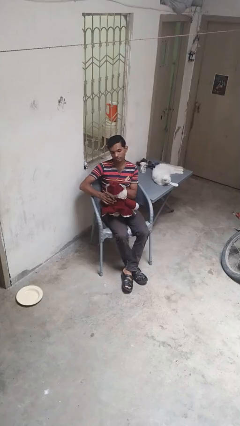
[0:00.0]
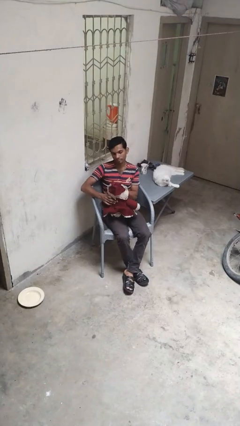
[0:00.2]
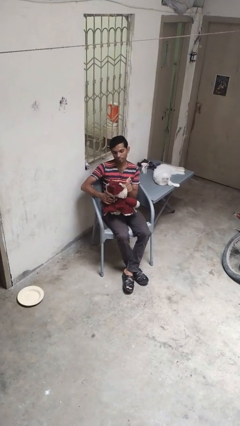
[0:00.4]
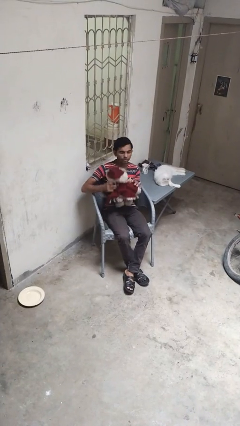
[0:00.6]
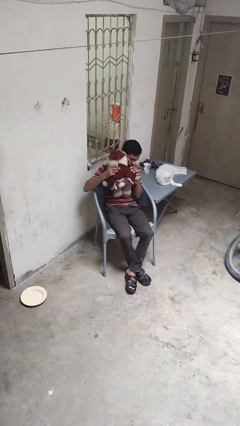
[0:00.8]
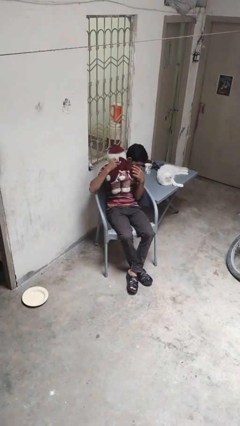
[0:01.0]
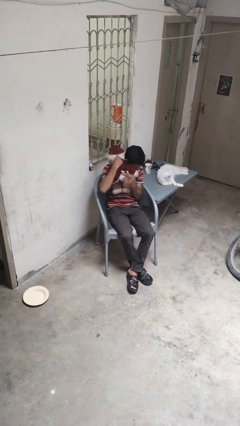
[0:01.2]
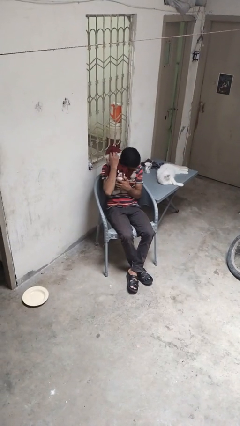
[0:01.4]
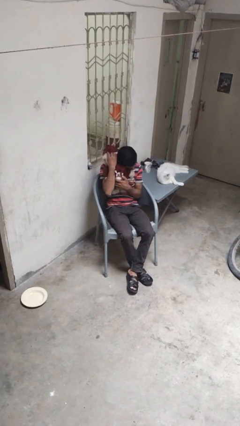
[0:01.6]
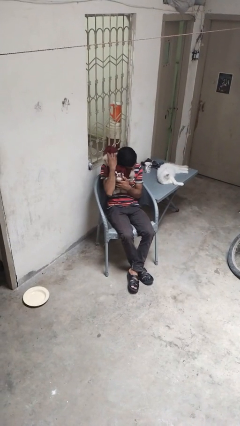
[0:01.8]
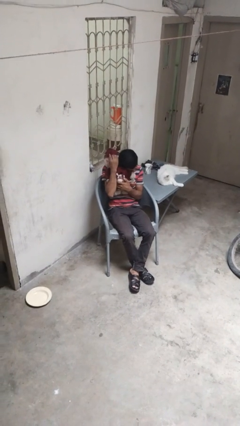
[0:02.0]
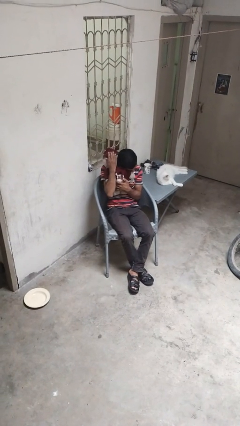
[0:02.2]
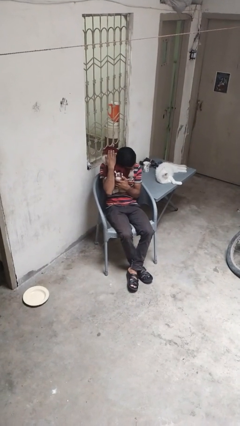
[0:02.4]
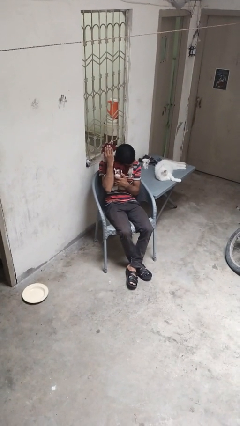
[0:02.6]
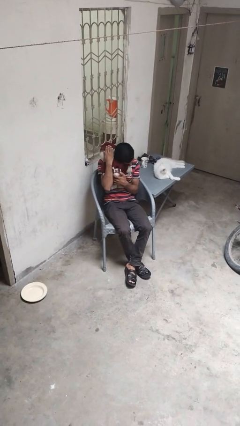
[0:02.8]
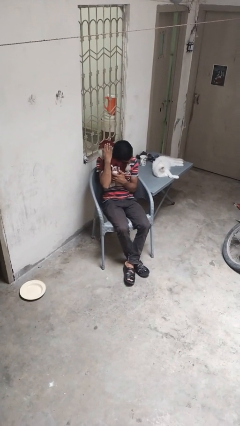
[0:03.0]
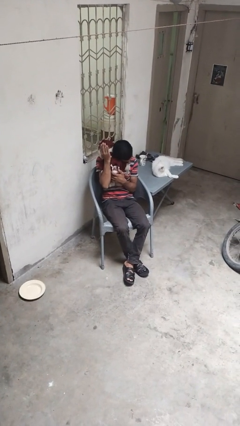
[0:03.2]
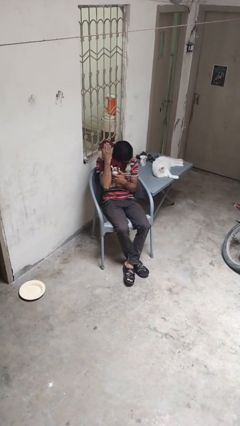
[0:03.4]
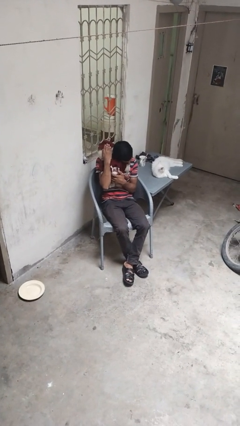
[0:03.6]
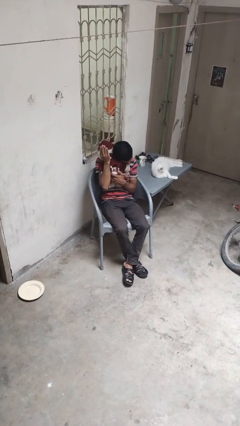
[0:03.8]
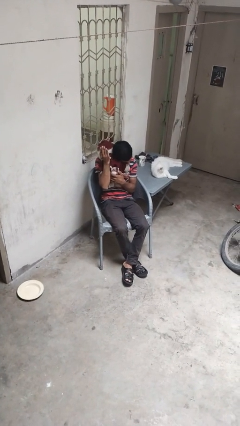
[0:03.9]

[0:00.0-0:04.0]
person hugs stuffed animal

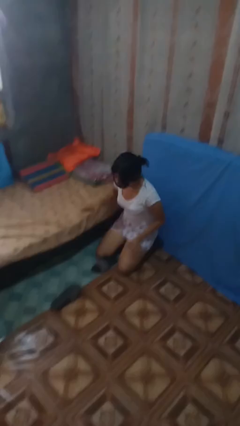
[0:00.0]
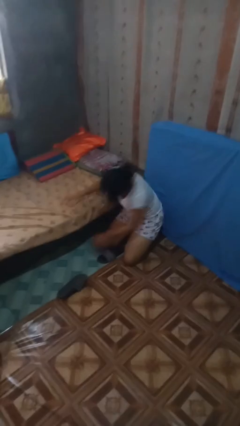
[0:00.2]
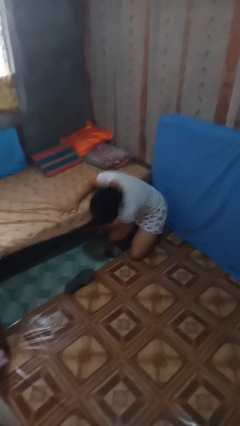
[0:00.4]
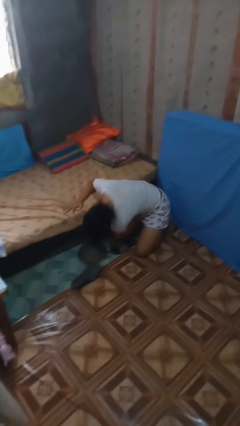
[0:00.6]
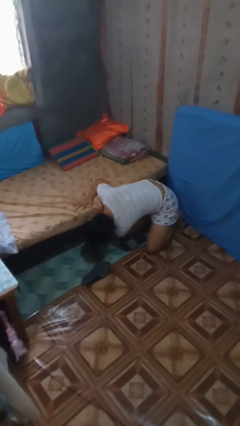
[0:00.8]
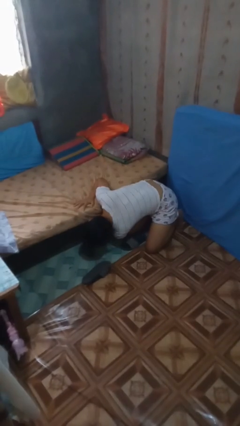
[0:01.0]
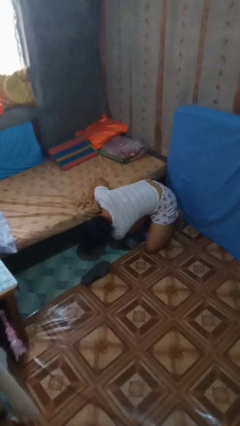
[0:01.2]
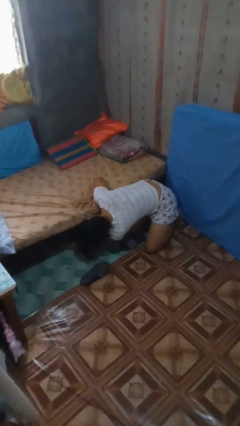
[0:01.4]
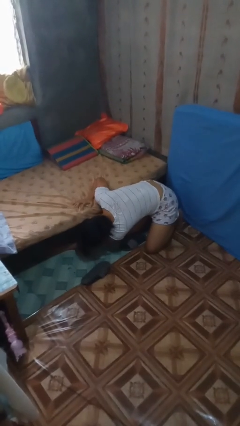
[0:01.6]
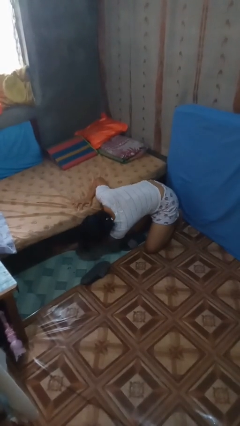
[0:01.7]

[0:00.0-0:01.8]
person searches under bed

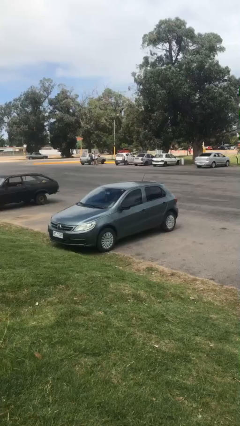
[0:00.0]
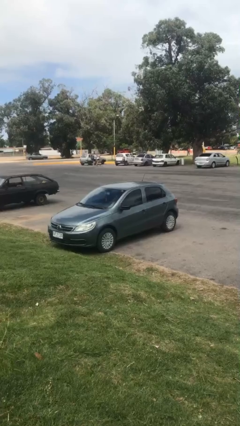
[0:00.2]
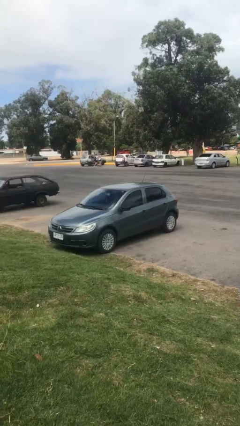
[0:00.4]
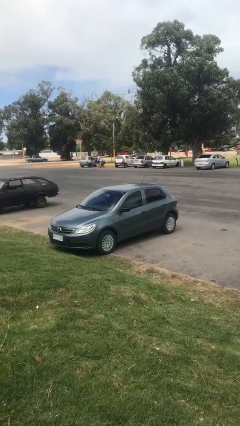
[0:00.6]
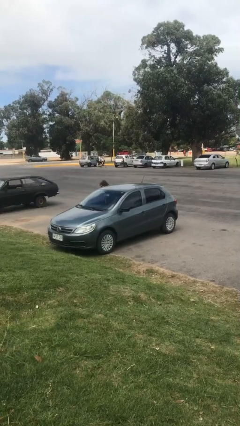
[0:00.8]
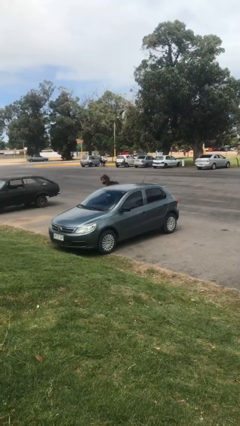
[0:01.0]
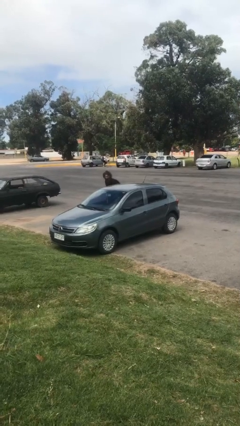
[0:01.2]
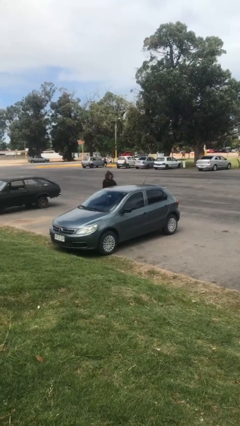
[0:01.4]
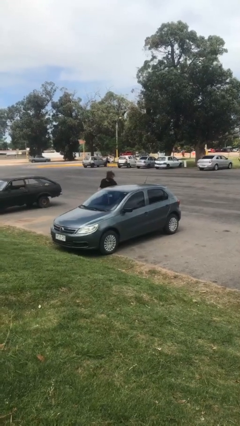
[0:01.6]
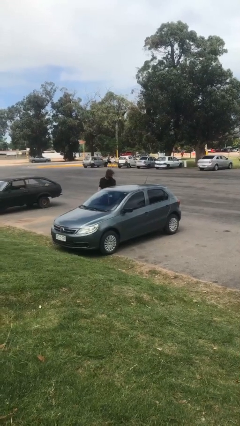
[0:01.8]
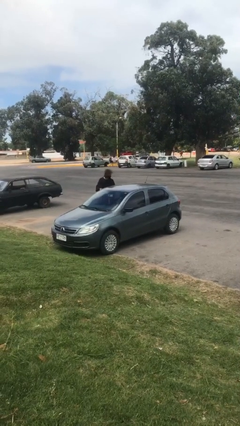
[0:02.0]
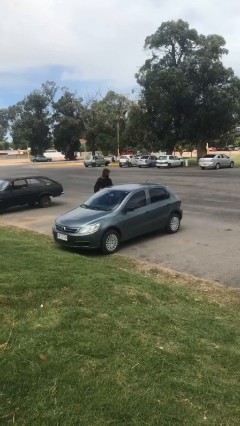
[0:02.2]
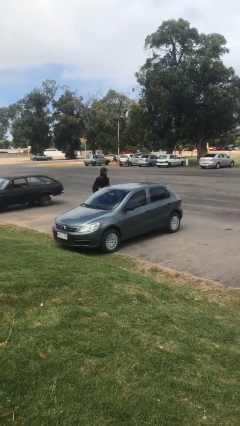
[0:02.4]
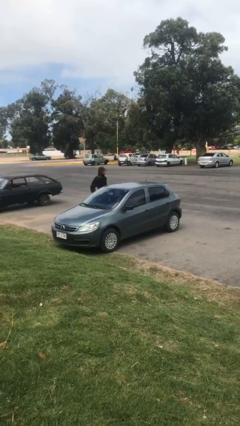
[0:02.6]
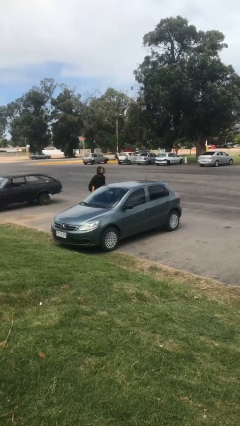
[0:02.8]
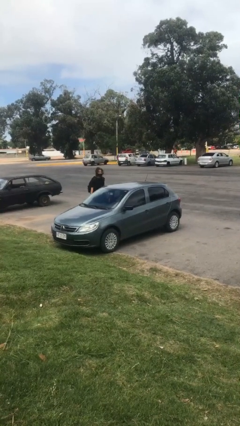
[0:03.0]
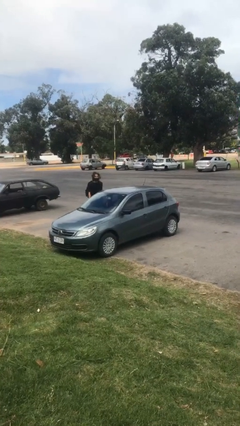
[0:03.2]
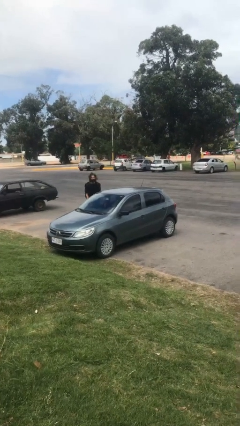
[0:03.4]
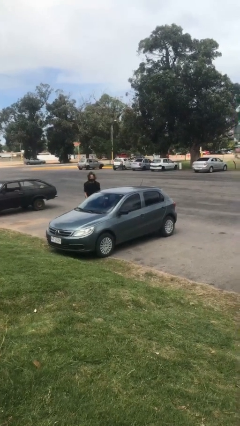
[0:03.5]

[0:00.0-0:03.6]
car drops off person

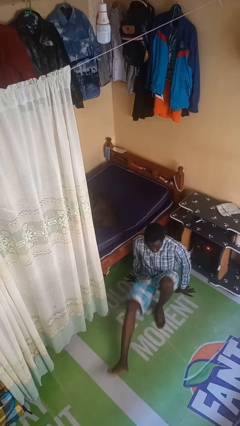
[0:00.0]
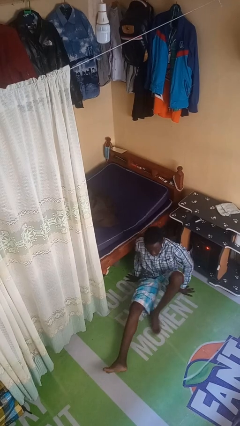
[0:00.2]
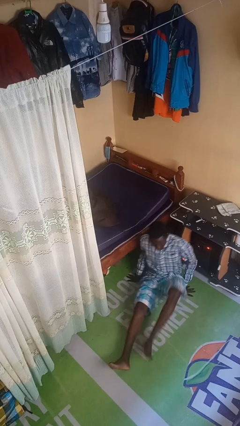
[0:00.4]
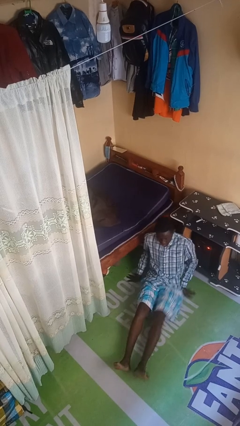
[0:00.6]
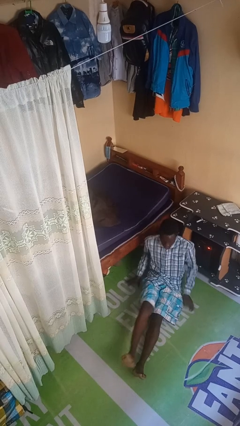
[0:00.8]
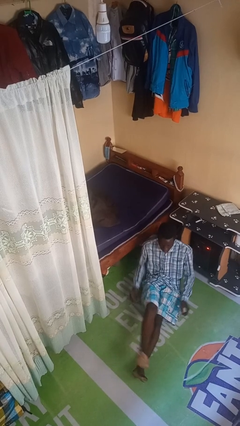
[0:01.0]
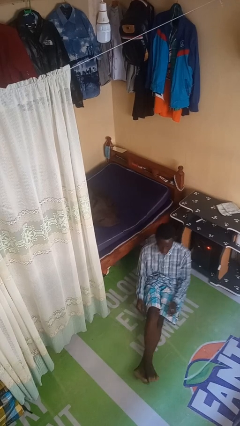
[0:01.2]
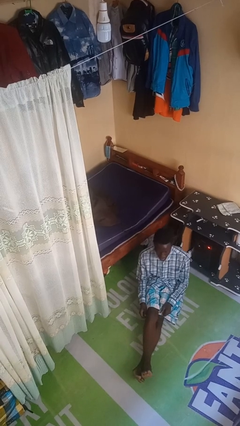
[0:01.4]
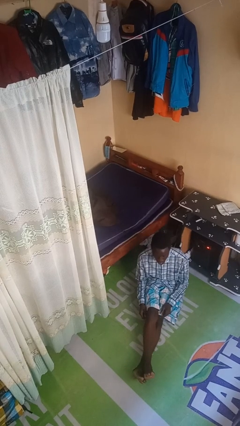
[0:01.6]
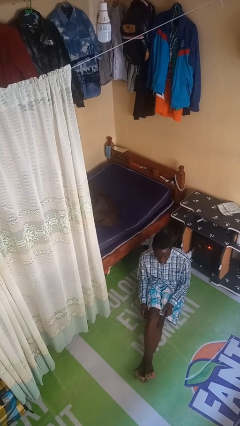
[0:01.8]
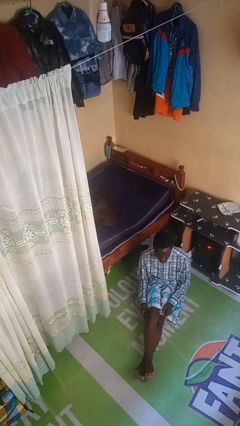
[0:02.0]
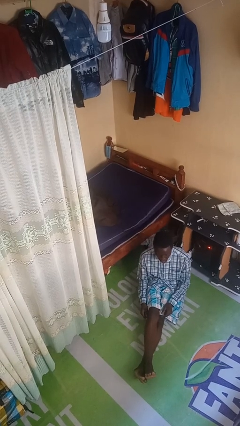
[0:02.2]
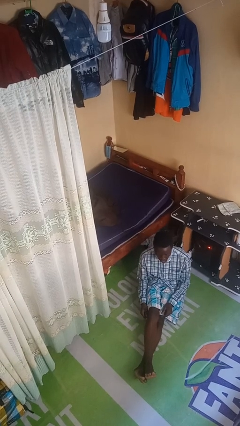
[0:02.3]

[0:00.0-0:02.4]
person sits crisscross

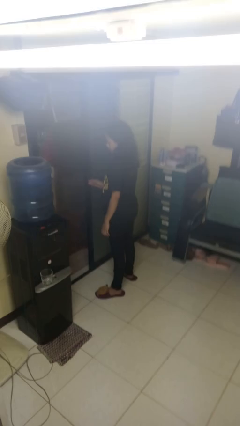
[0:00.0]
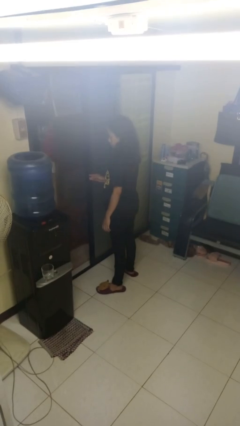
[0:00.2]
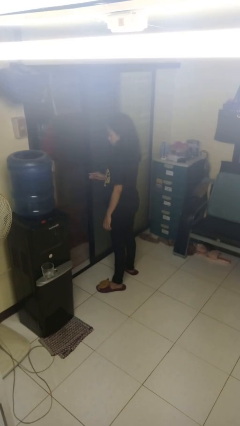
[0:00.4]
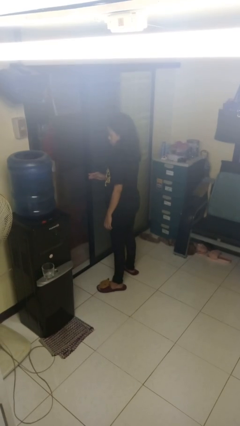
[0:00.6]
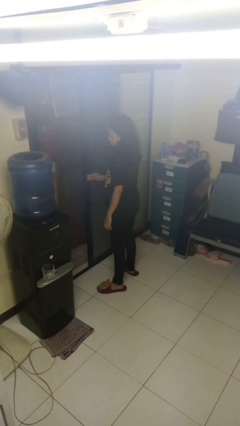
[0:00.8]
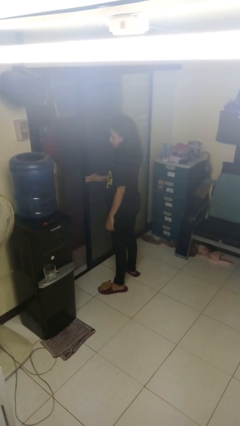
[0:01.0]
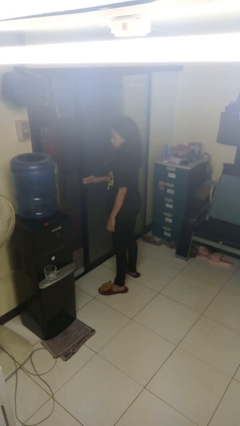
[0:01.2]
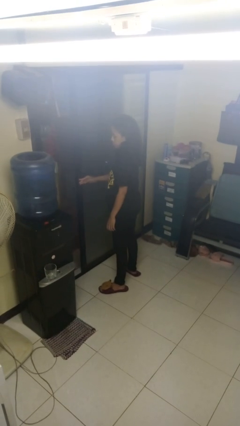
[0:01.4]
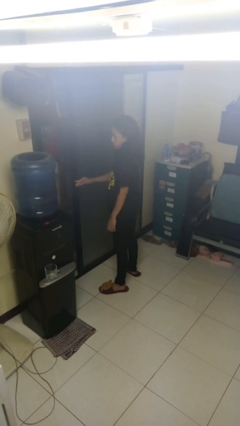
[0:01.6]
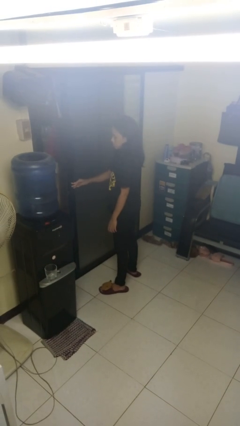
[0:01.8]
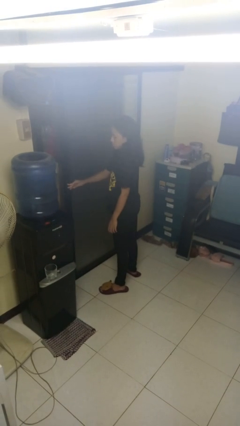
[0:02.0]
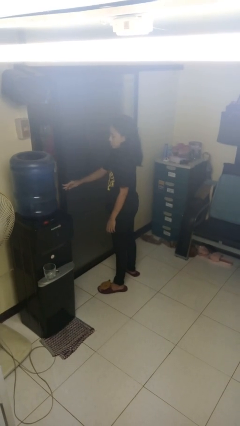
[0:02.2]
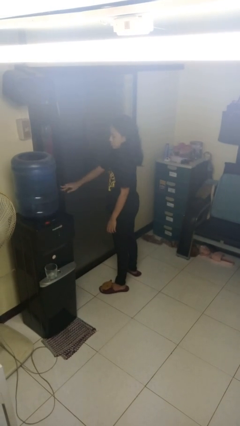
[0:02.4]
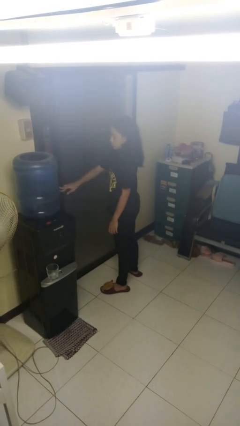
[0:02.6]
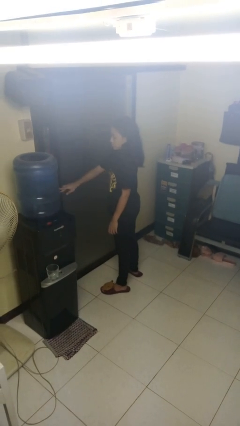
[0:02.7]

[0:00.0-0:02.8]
person closes sliding door

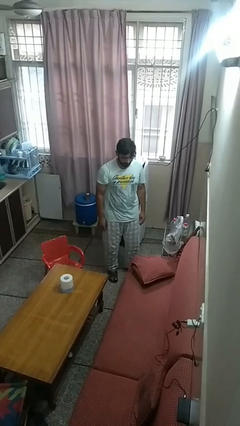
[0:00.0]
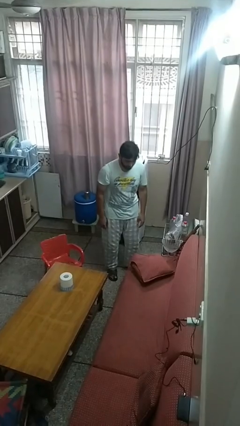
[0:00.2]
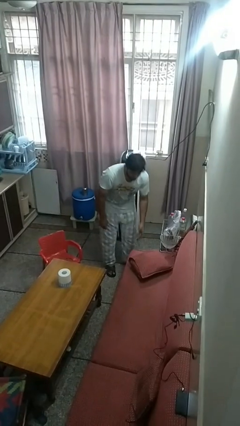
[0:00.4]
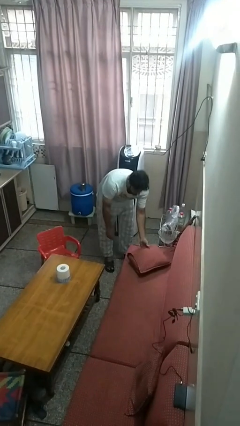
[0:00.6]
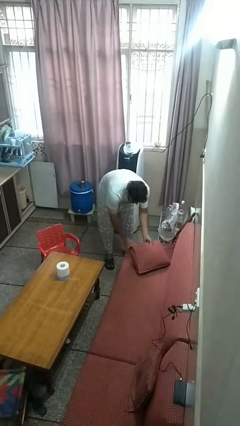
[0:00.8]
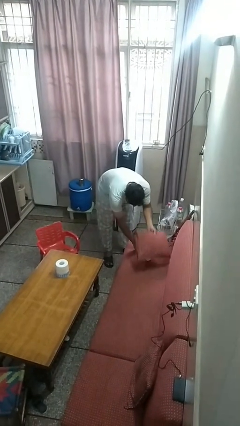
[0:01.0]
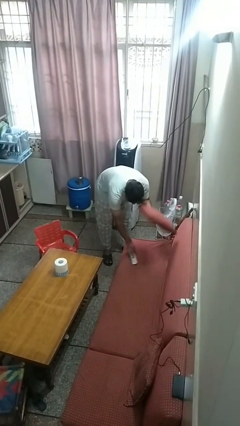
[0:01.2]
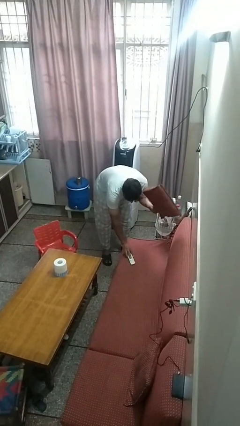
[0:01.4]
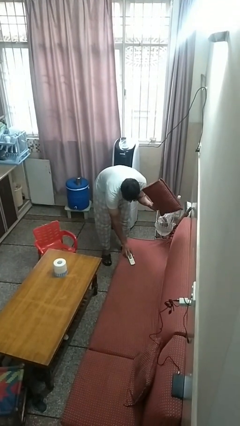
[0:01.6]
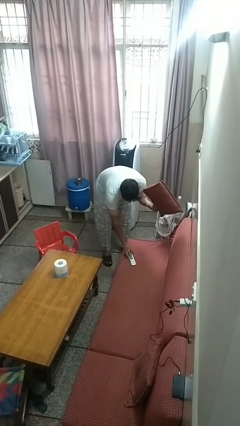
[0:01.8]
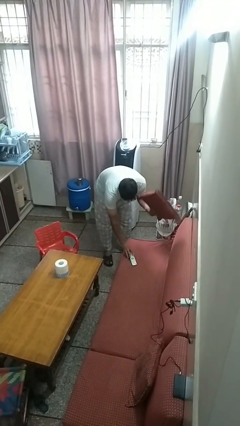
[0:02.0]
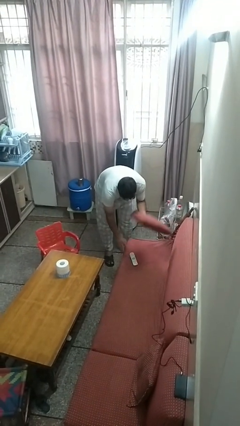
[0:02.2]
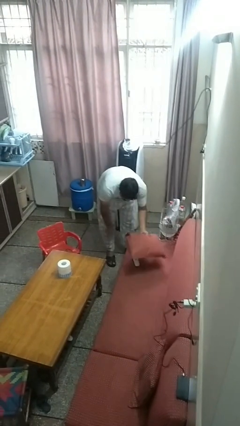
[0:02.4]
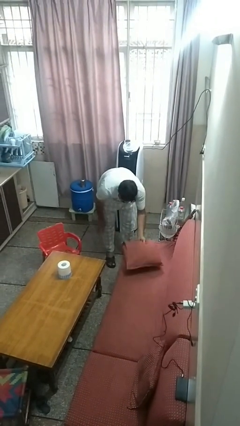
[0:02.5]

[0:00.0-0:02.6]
person searches in couch

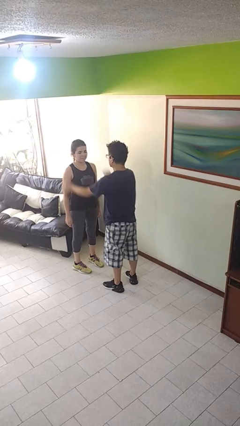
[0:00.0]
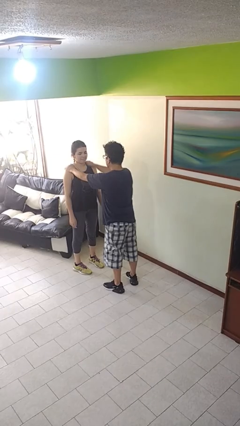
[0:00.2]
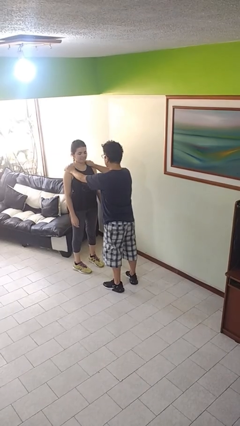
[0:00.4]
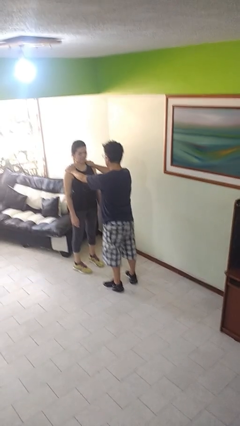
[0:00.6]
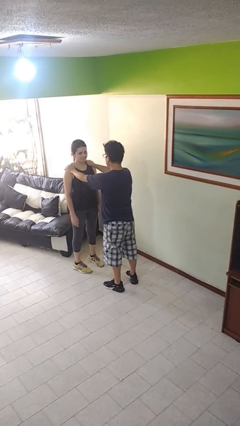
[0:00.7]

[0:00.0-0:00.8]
person grabs person by shoulder
